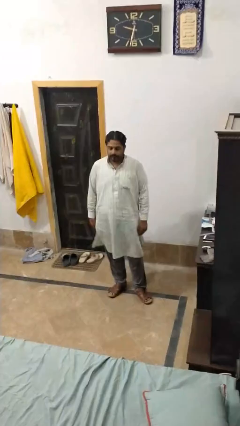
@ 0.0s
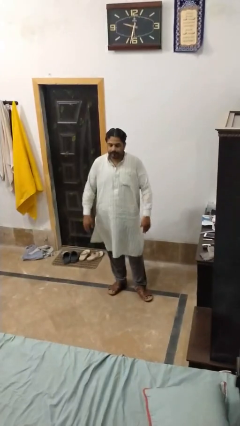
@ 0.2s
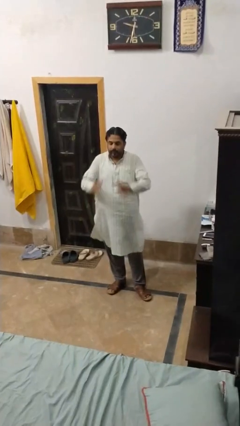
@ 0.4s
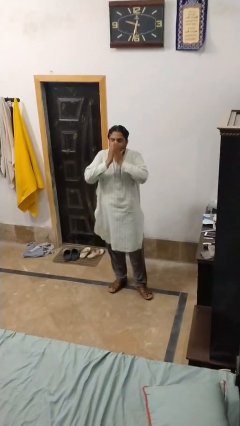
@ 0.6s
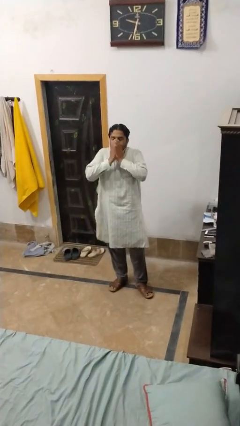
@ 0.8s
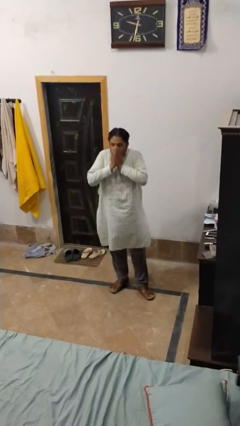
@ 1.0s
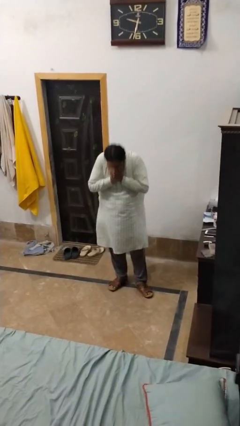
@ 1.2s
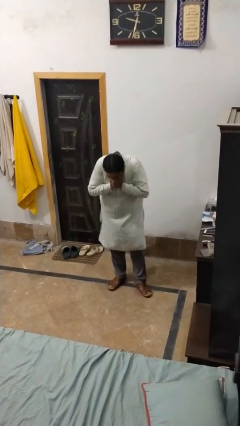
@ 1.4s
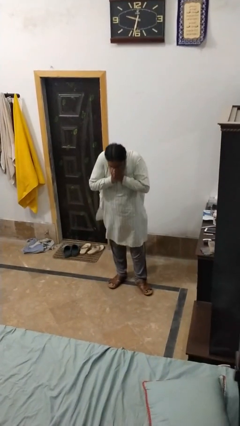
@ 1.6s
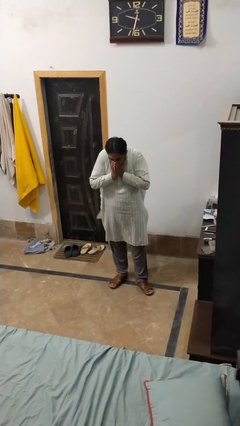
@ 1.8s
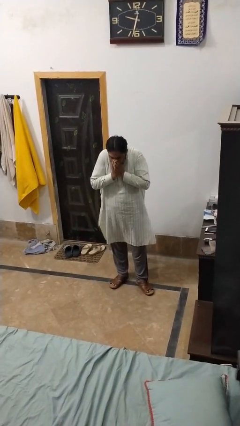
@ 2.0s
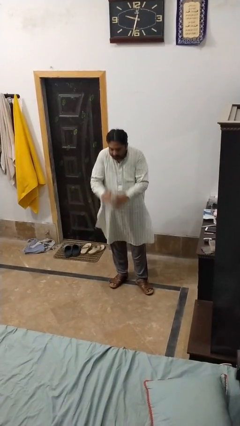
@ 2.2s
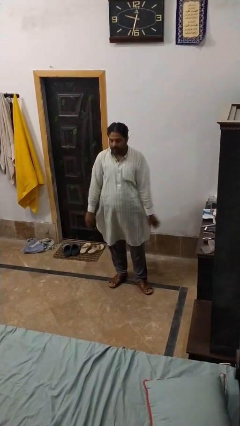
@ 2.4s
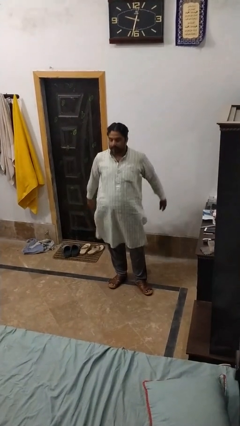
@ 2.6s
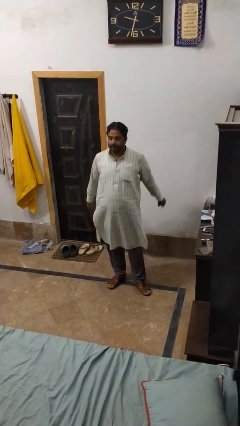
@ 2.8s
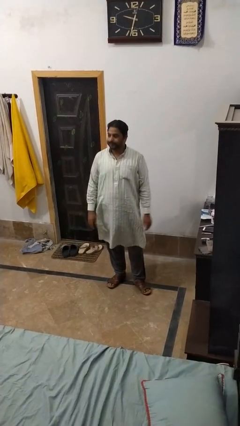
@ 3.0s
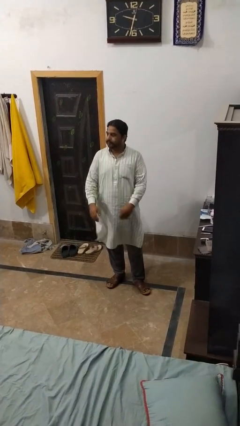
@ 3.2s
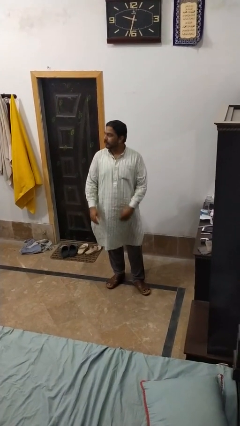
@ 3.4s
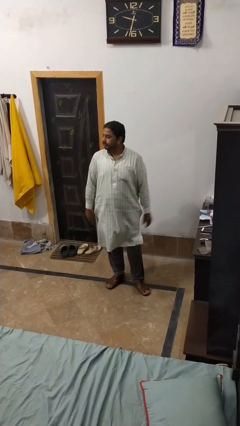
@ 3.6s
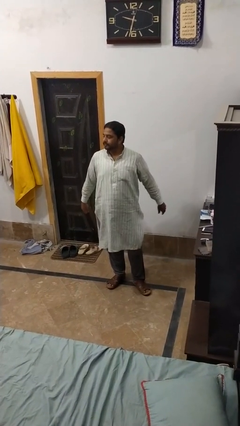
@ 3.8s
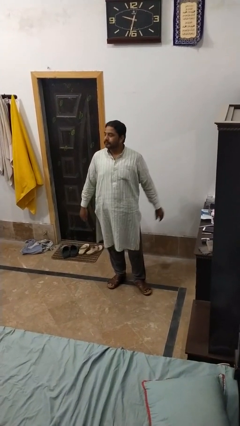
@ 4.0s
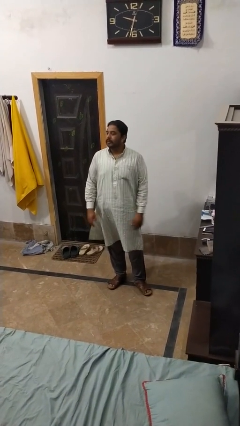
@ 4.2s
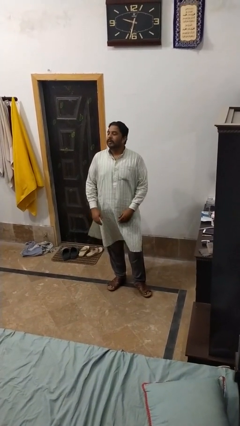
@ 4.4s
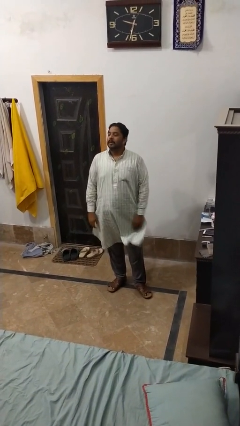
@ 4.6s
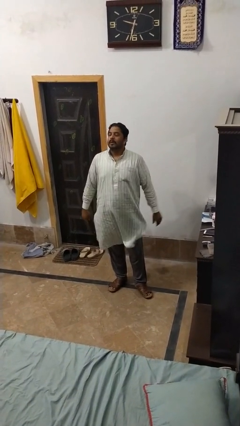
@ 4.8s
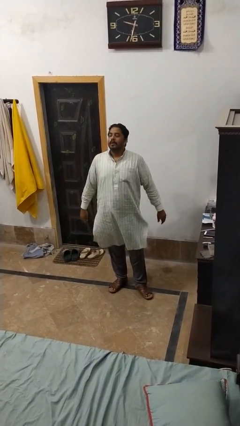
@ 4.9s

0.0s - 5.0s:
person sneezes into hand

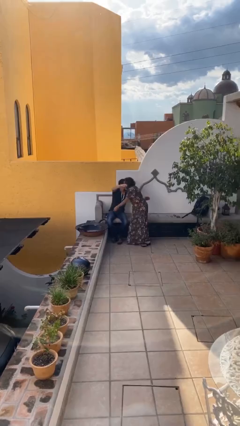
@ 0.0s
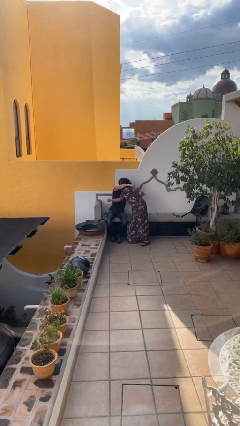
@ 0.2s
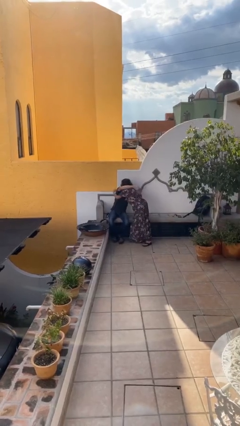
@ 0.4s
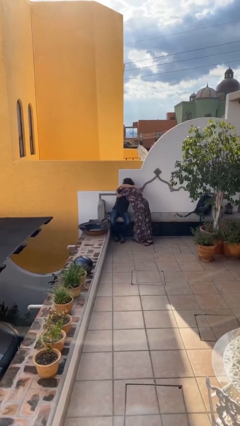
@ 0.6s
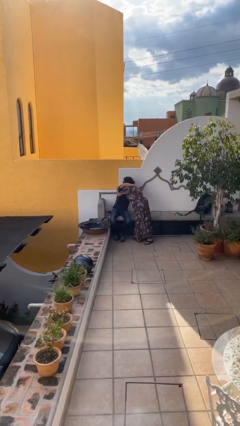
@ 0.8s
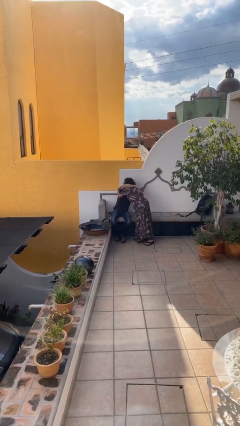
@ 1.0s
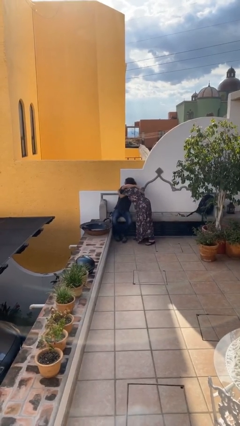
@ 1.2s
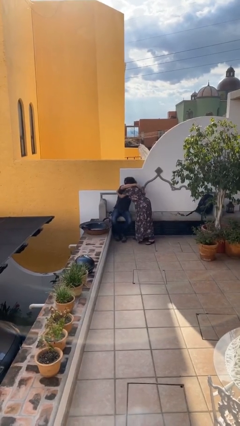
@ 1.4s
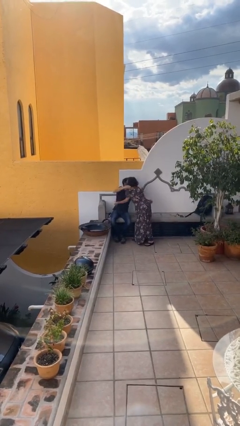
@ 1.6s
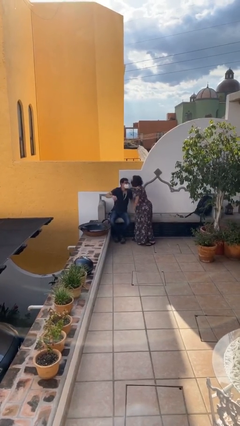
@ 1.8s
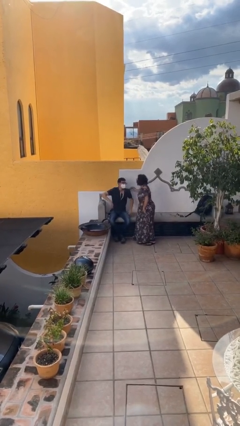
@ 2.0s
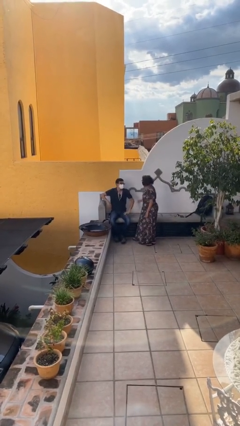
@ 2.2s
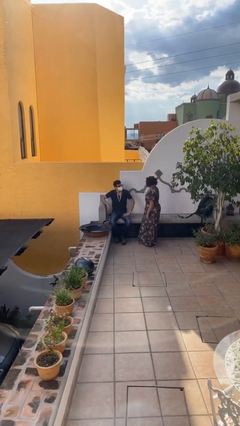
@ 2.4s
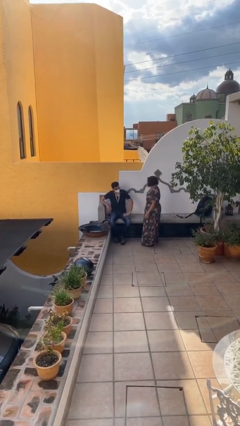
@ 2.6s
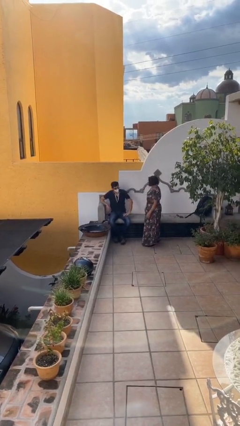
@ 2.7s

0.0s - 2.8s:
person embraces person

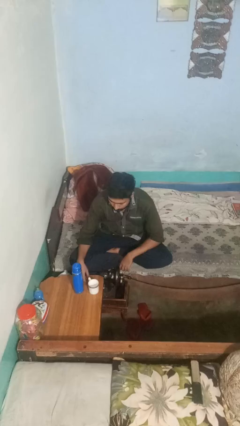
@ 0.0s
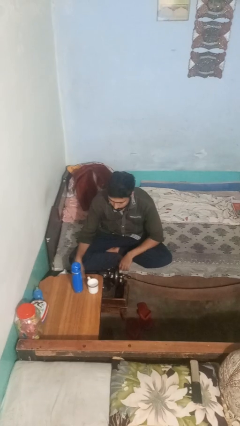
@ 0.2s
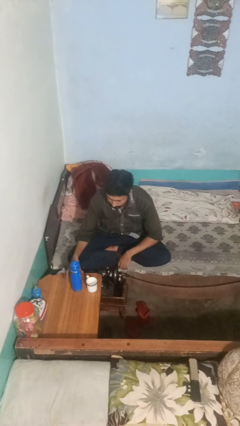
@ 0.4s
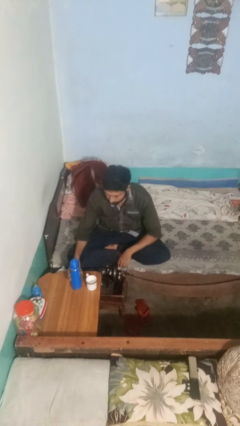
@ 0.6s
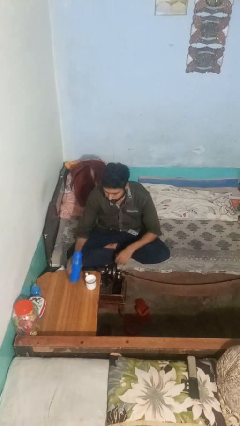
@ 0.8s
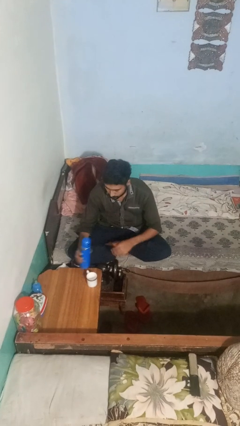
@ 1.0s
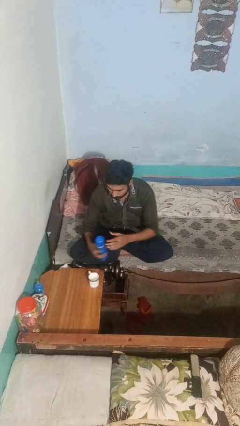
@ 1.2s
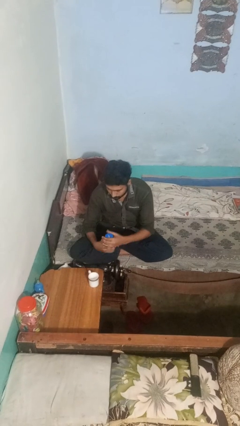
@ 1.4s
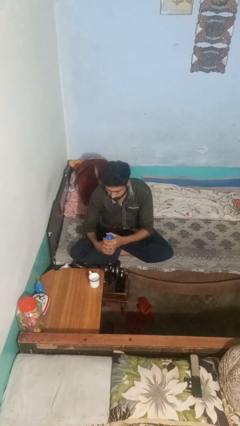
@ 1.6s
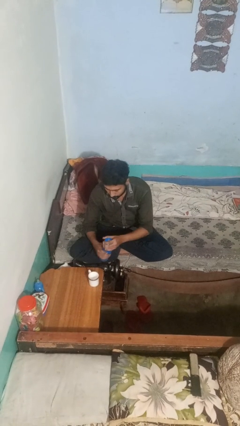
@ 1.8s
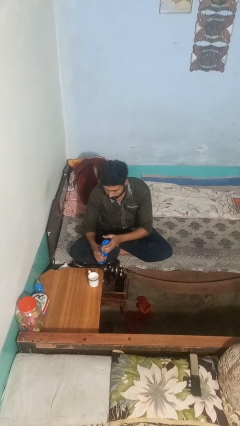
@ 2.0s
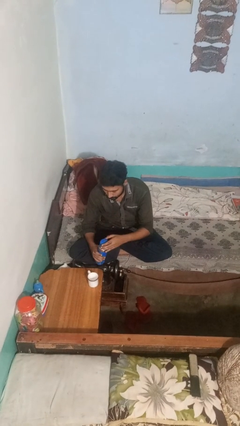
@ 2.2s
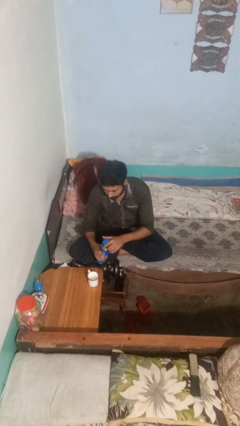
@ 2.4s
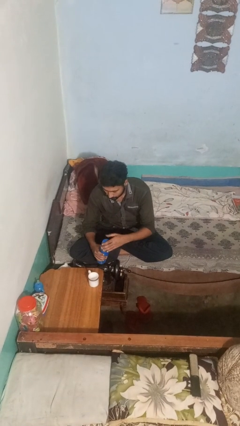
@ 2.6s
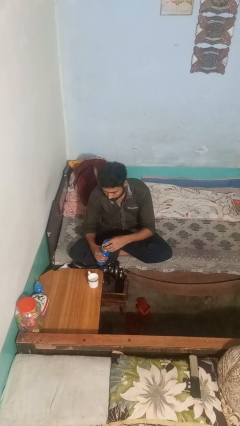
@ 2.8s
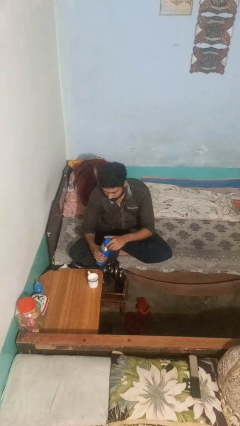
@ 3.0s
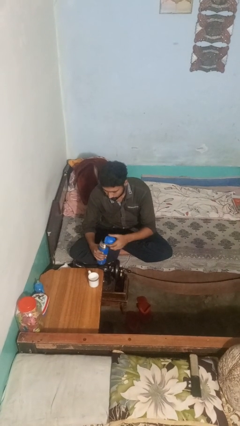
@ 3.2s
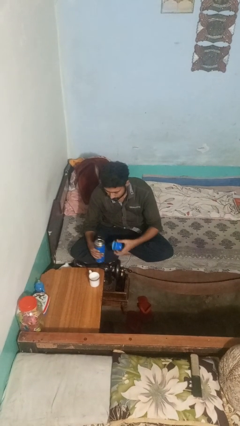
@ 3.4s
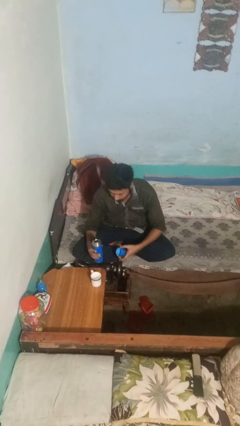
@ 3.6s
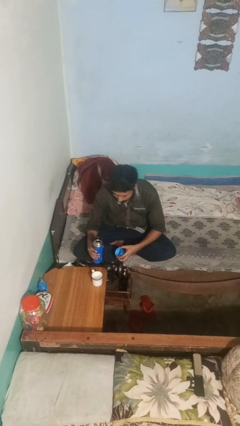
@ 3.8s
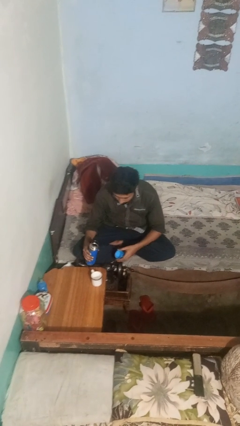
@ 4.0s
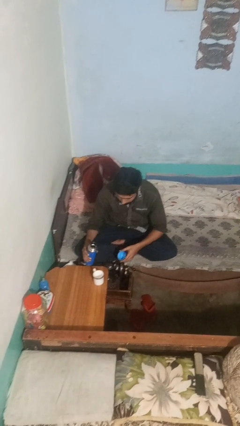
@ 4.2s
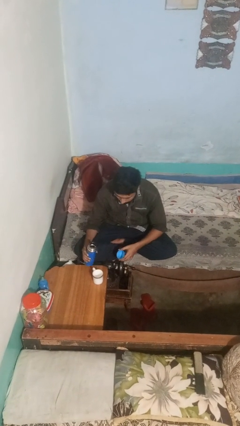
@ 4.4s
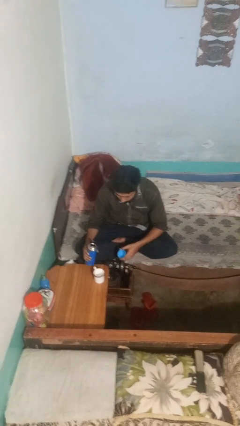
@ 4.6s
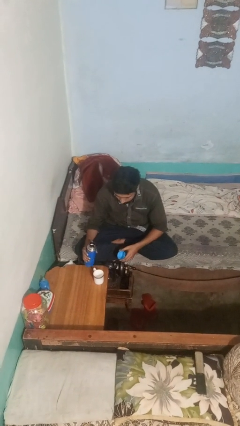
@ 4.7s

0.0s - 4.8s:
person unscrews lid from bottle

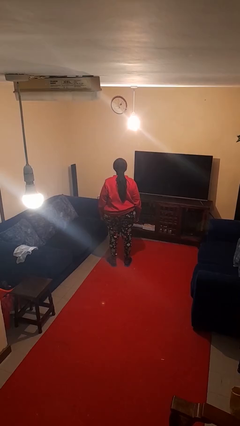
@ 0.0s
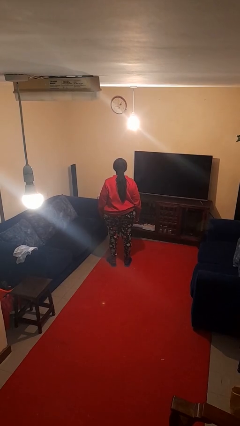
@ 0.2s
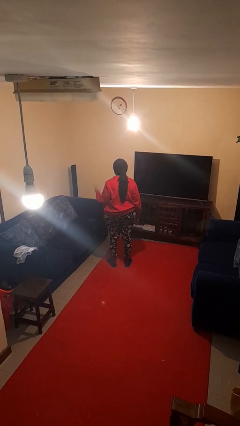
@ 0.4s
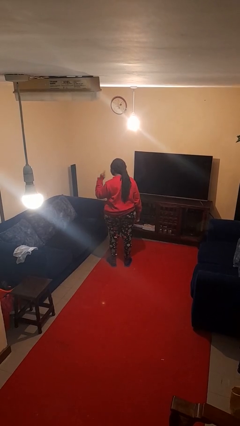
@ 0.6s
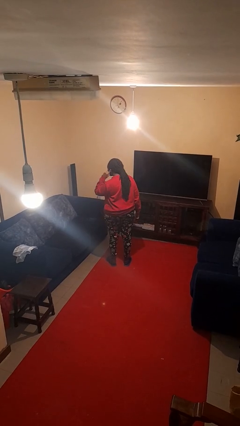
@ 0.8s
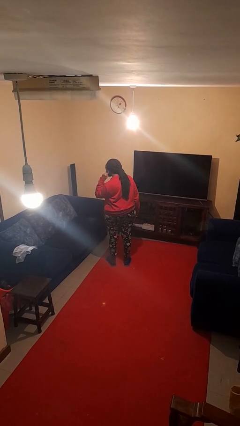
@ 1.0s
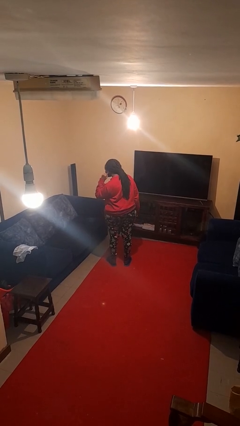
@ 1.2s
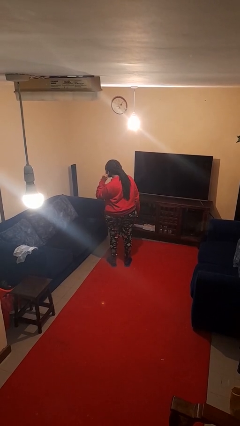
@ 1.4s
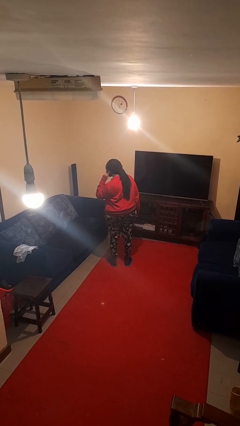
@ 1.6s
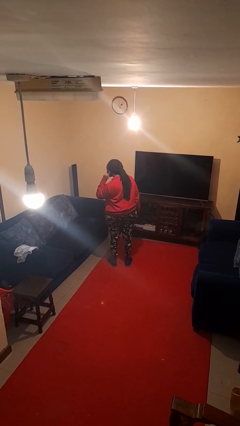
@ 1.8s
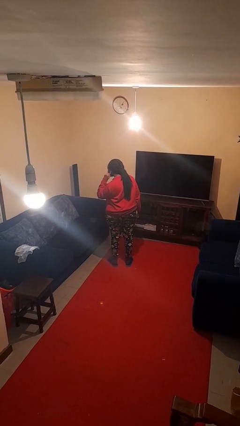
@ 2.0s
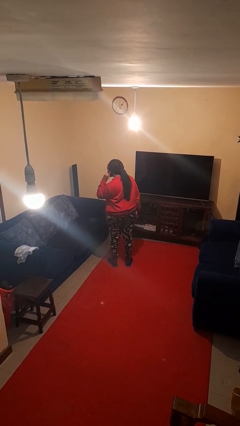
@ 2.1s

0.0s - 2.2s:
person gestures listen closely

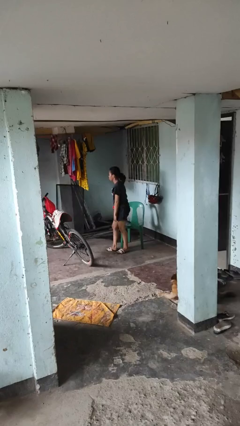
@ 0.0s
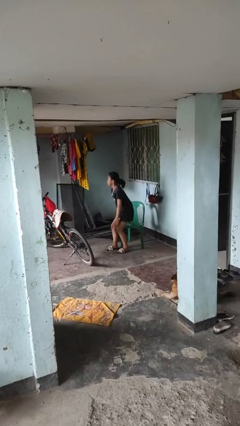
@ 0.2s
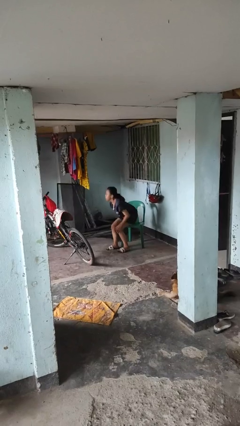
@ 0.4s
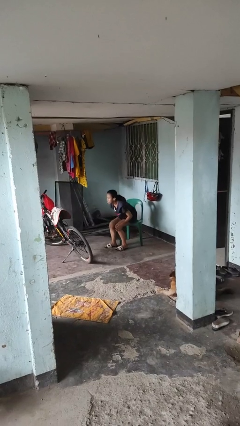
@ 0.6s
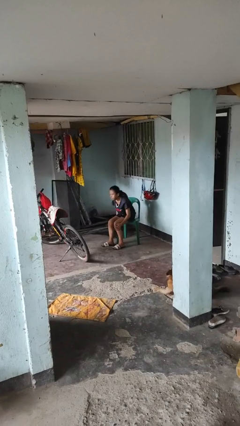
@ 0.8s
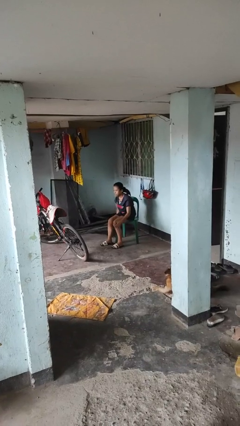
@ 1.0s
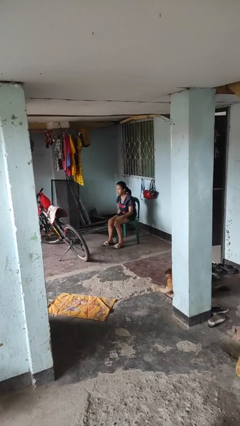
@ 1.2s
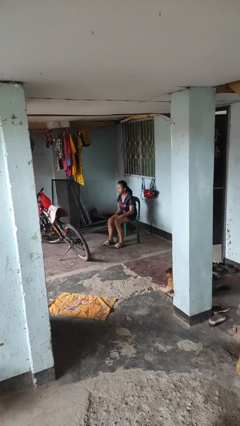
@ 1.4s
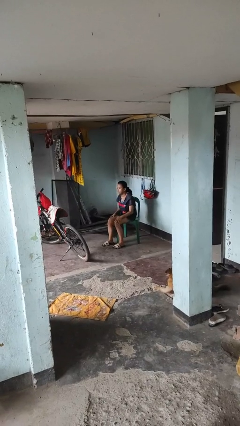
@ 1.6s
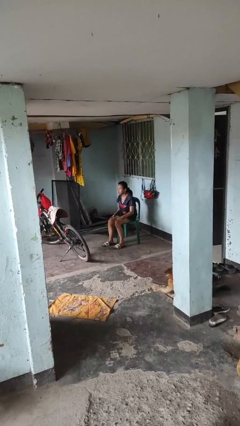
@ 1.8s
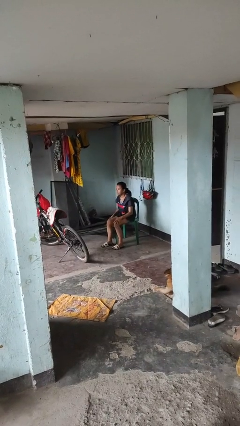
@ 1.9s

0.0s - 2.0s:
person sits down

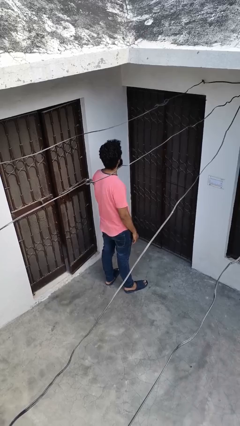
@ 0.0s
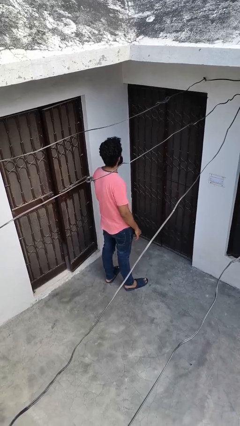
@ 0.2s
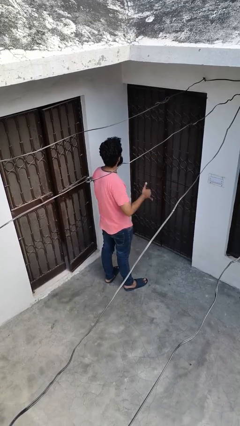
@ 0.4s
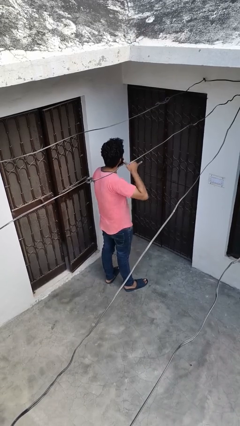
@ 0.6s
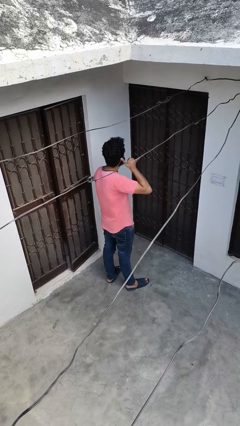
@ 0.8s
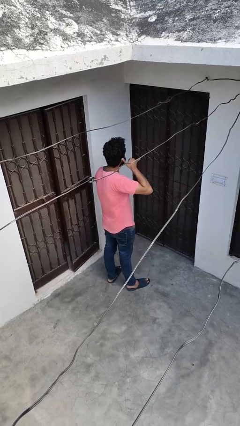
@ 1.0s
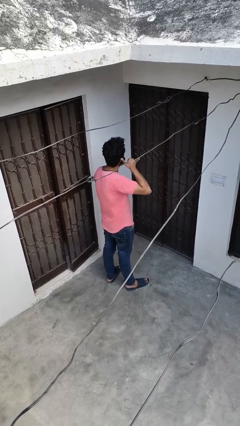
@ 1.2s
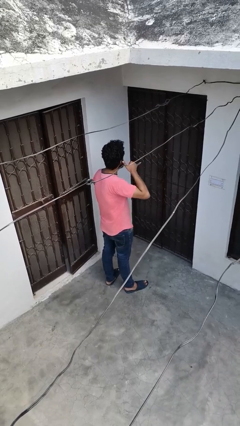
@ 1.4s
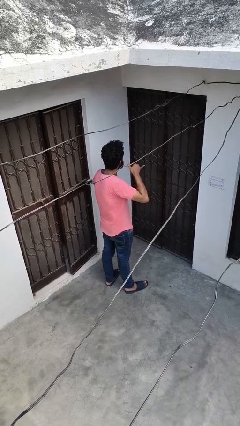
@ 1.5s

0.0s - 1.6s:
person gestures call me
